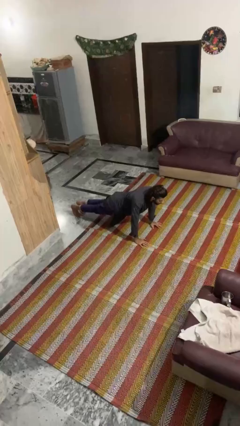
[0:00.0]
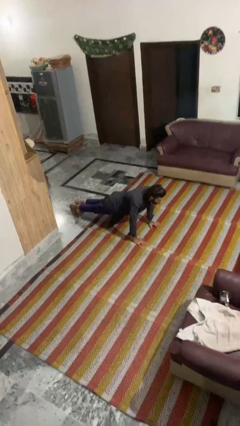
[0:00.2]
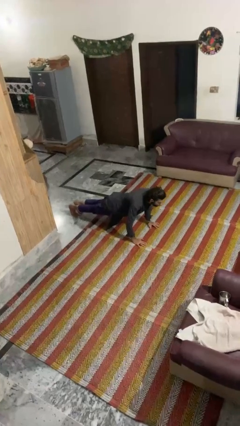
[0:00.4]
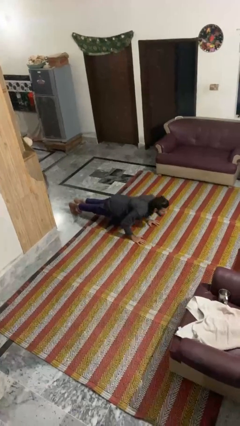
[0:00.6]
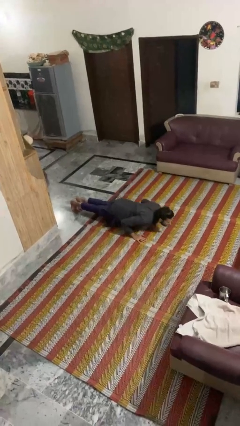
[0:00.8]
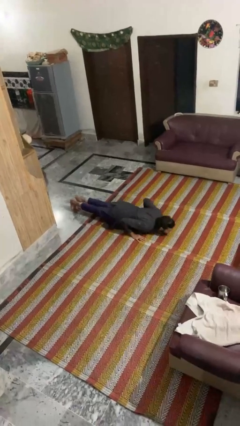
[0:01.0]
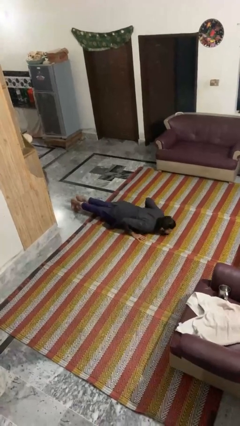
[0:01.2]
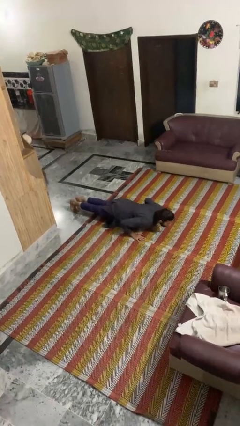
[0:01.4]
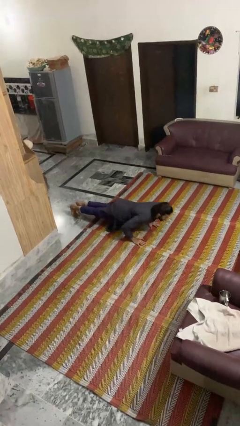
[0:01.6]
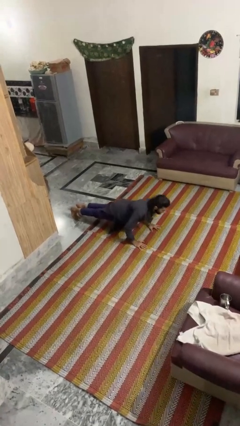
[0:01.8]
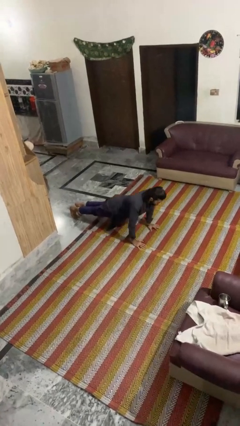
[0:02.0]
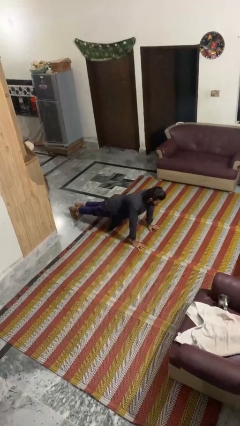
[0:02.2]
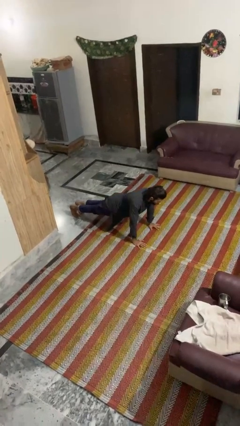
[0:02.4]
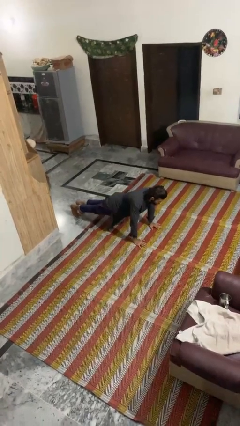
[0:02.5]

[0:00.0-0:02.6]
person exercises with pushup

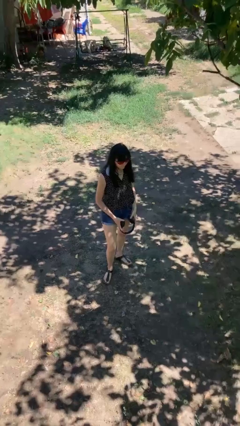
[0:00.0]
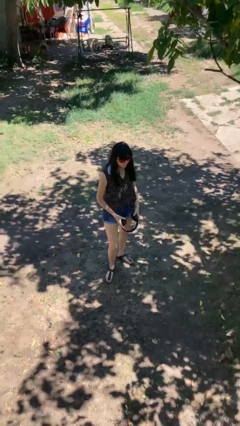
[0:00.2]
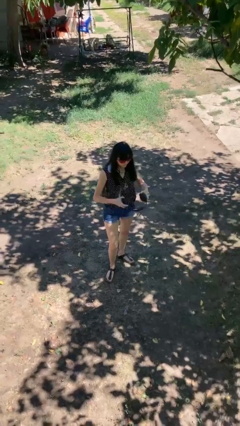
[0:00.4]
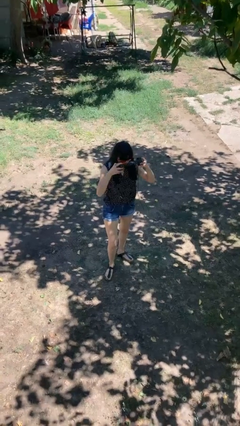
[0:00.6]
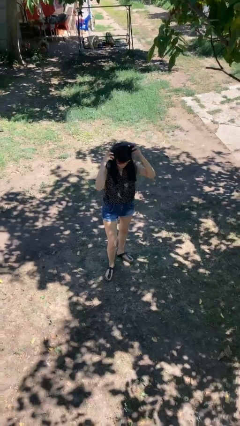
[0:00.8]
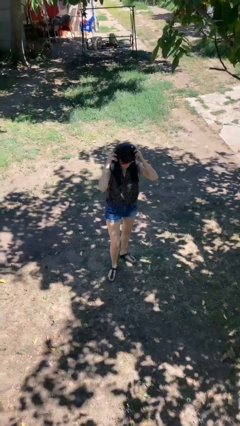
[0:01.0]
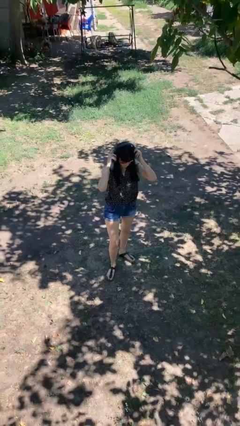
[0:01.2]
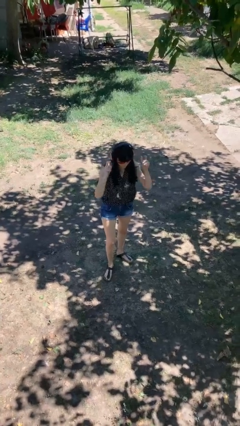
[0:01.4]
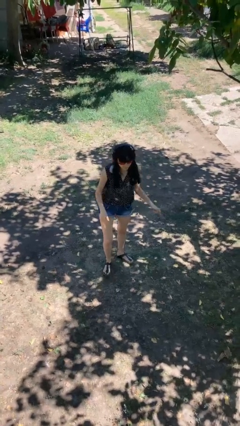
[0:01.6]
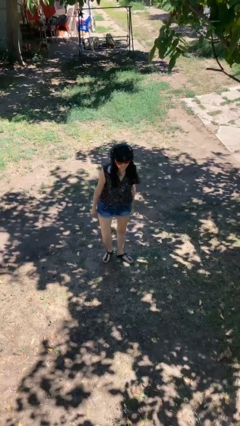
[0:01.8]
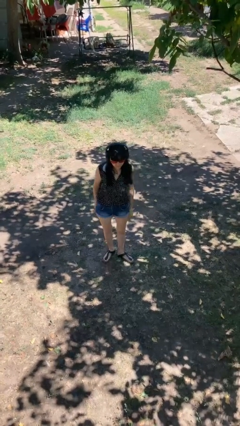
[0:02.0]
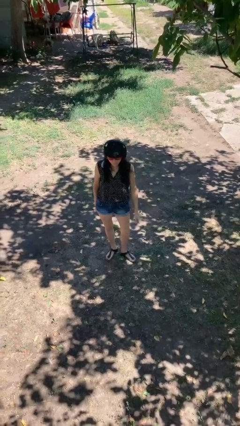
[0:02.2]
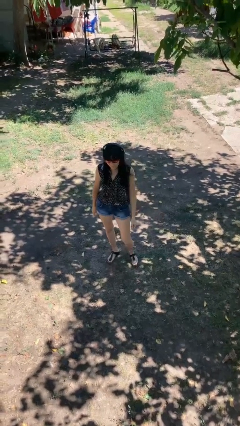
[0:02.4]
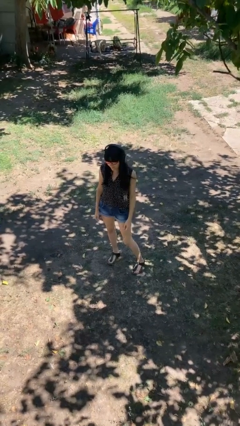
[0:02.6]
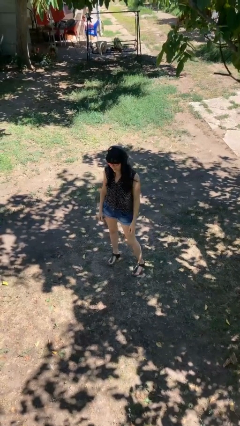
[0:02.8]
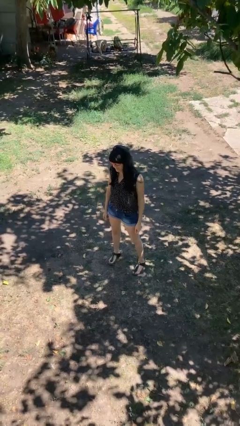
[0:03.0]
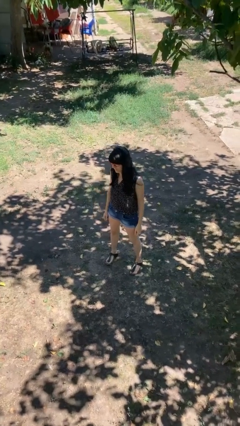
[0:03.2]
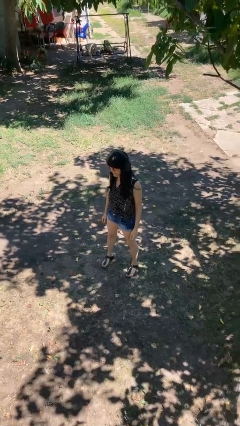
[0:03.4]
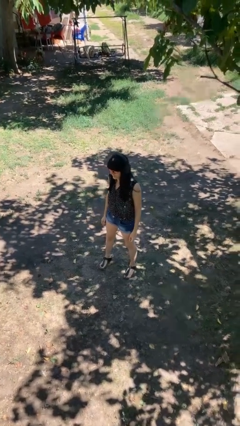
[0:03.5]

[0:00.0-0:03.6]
person puts on headphones

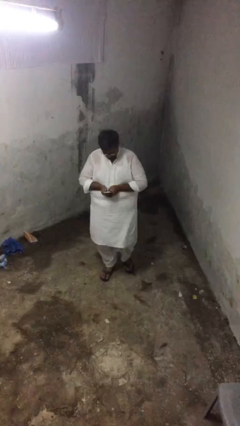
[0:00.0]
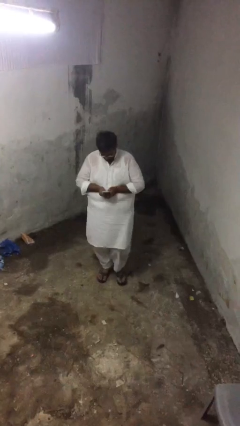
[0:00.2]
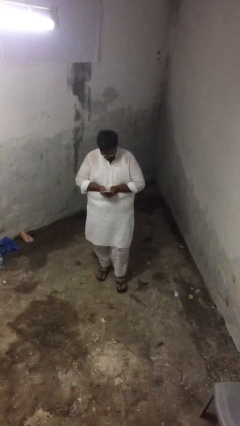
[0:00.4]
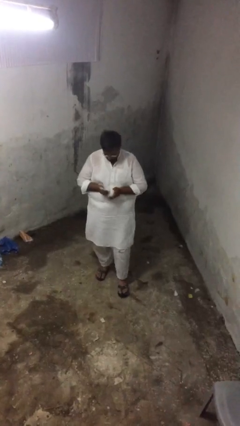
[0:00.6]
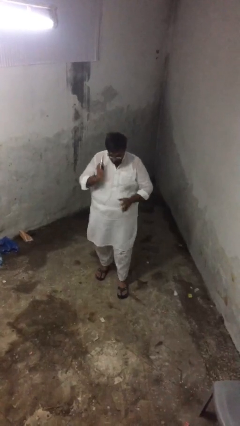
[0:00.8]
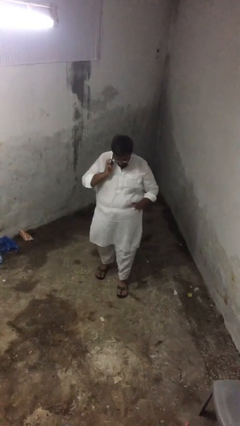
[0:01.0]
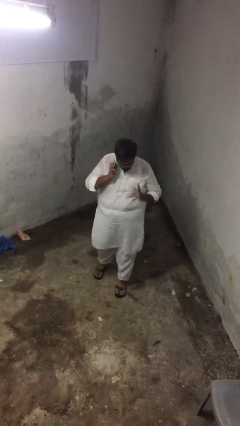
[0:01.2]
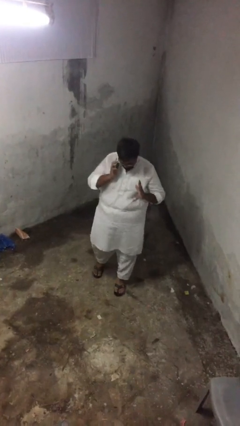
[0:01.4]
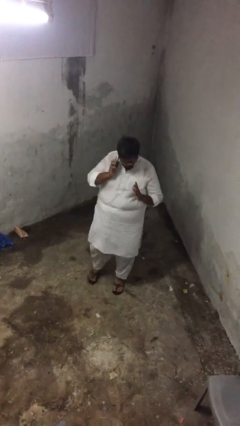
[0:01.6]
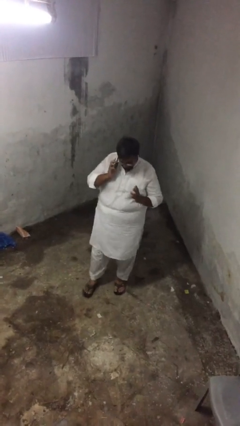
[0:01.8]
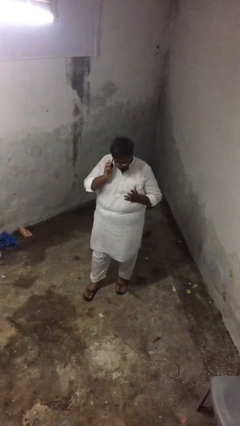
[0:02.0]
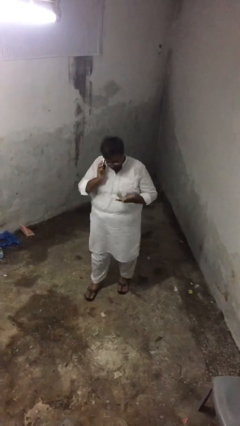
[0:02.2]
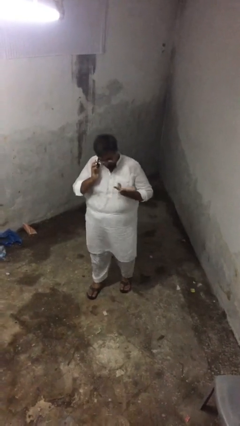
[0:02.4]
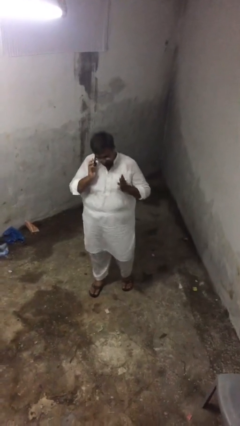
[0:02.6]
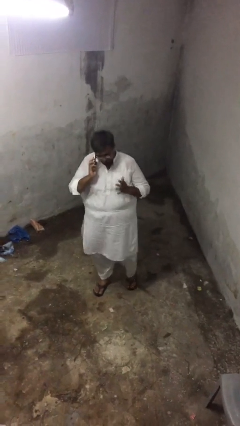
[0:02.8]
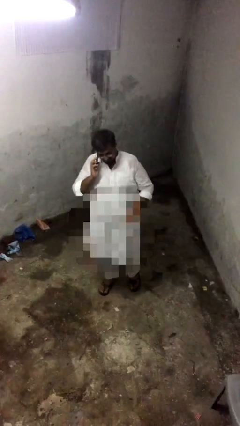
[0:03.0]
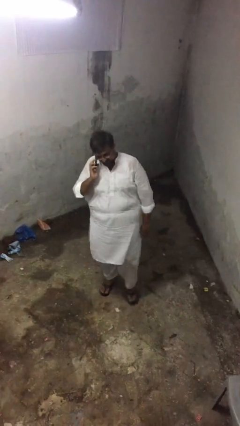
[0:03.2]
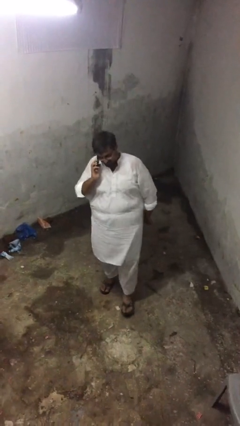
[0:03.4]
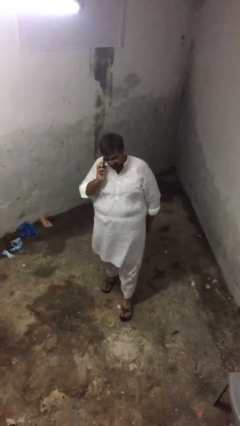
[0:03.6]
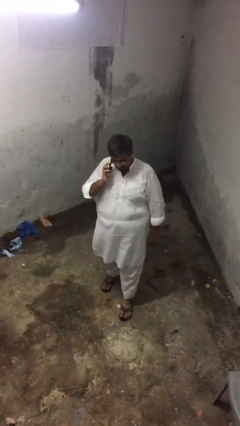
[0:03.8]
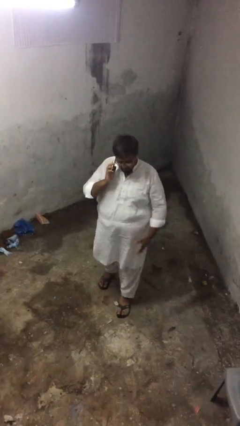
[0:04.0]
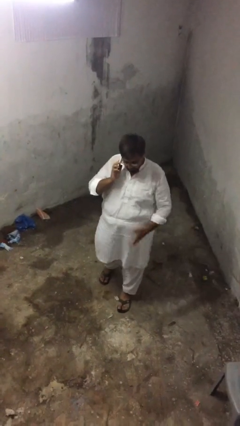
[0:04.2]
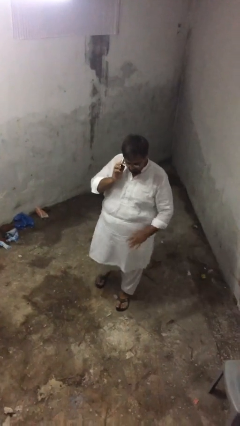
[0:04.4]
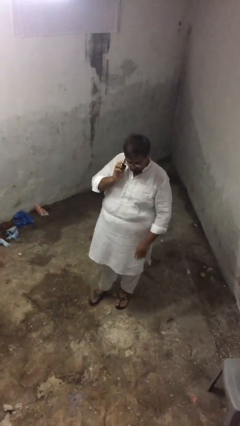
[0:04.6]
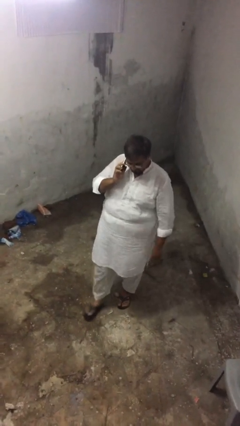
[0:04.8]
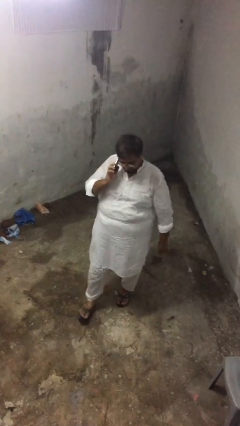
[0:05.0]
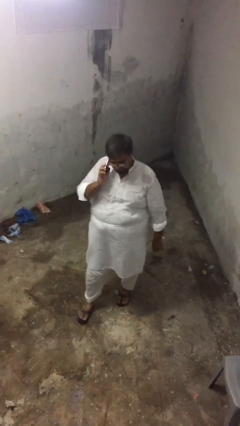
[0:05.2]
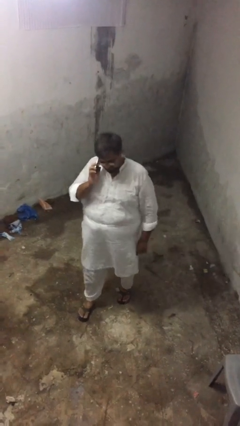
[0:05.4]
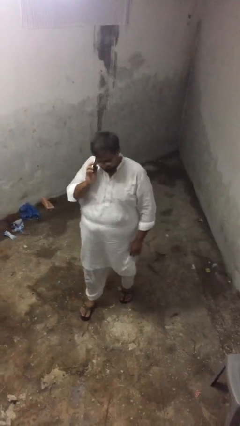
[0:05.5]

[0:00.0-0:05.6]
person talks on phone

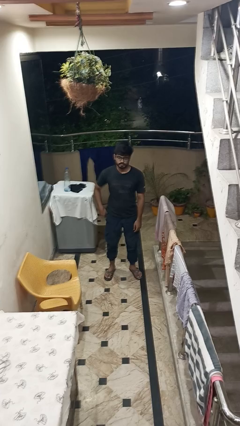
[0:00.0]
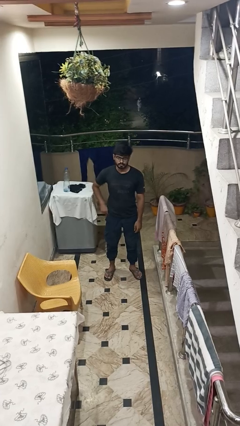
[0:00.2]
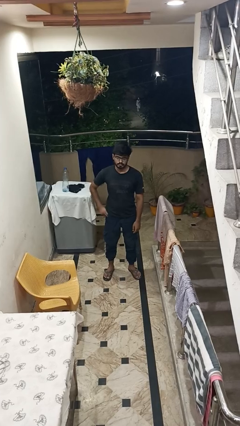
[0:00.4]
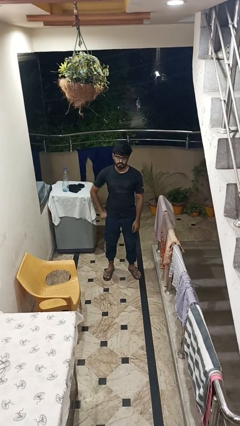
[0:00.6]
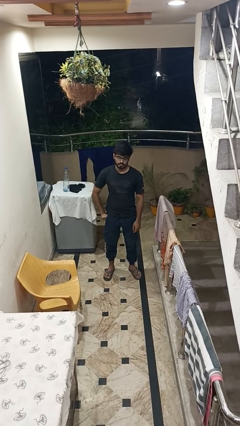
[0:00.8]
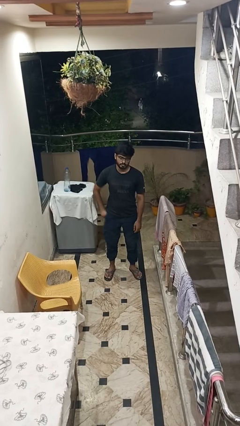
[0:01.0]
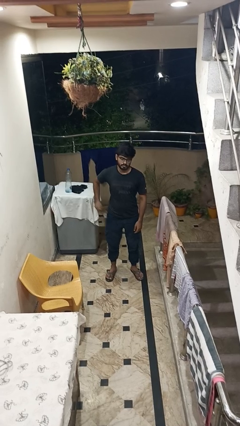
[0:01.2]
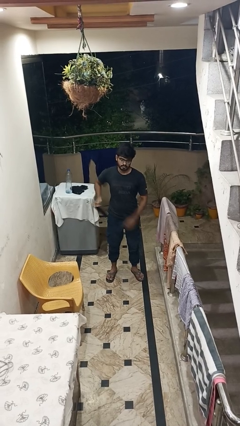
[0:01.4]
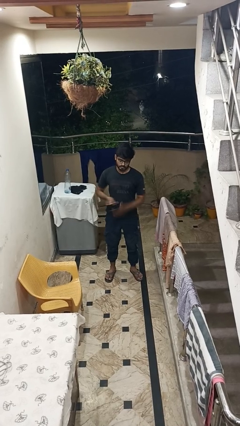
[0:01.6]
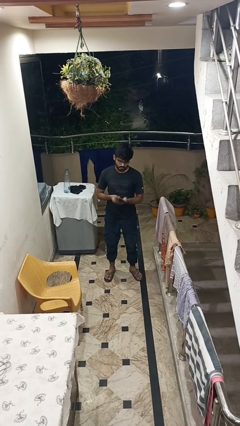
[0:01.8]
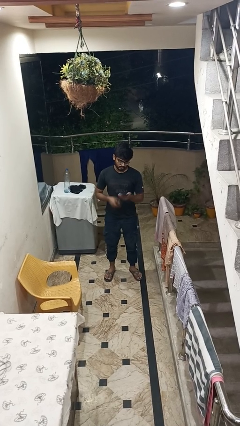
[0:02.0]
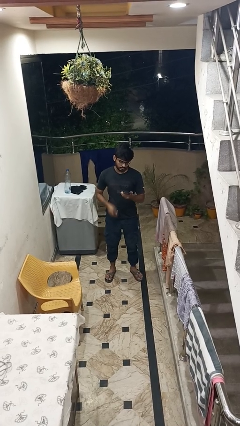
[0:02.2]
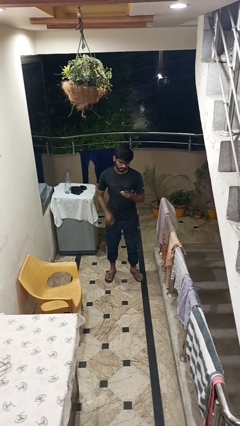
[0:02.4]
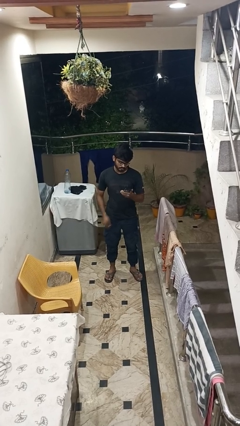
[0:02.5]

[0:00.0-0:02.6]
person takes phone from pocket

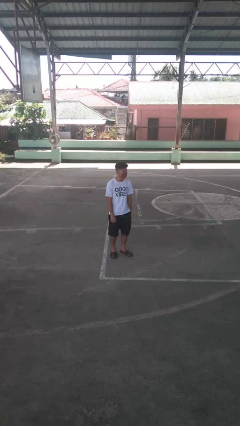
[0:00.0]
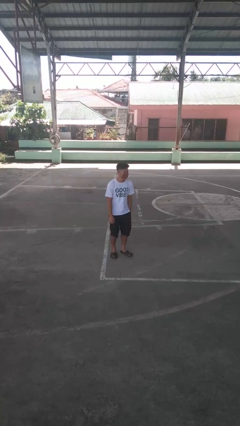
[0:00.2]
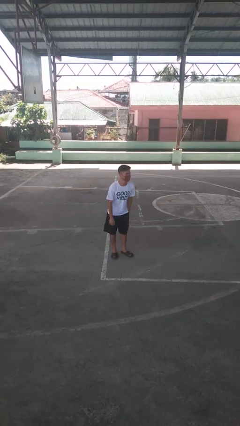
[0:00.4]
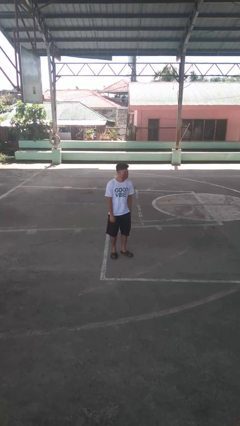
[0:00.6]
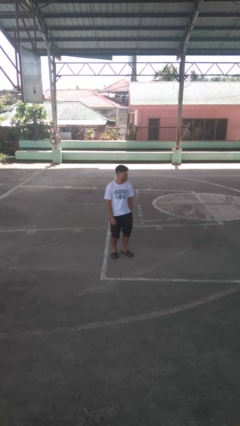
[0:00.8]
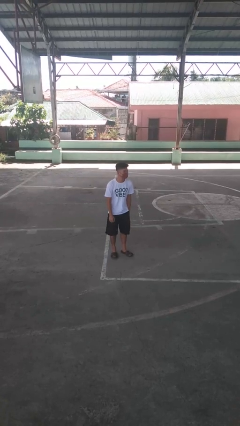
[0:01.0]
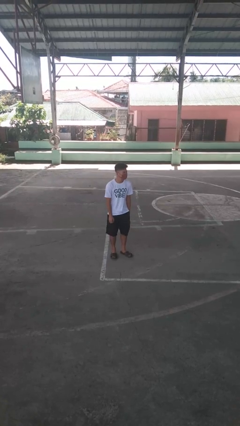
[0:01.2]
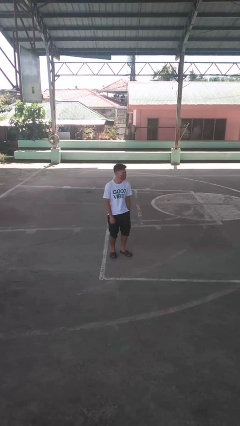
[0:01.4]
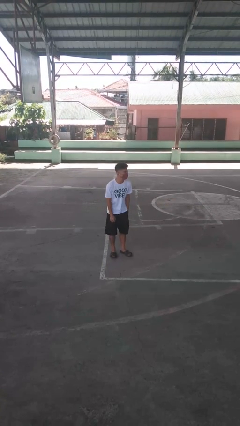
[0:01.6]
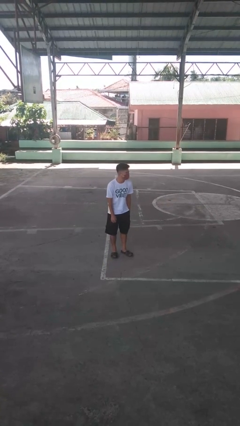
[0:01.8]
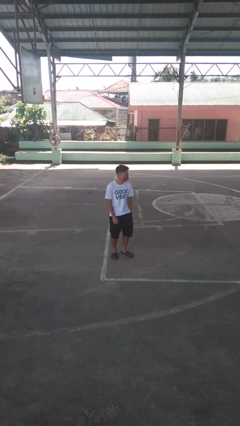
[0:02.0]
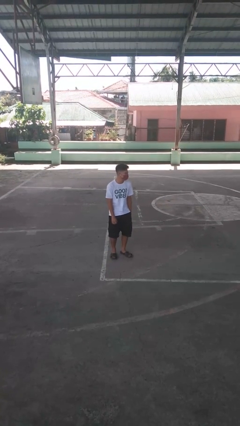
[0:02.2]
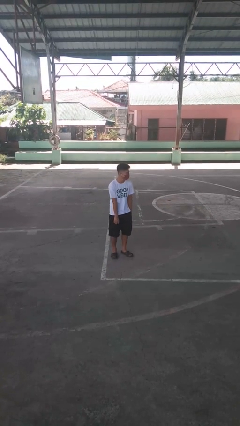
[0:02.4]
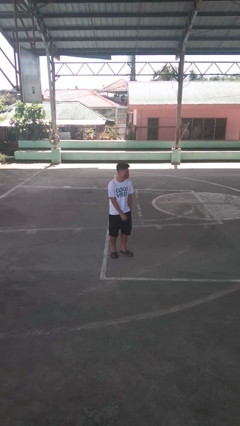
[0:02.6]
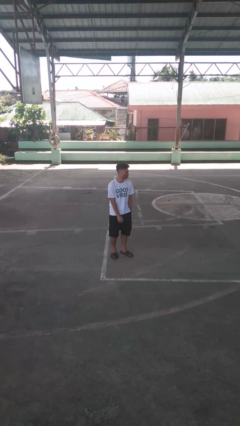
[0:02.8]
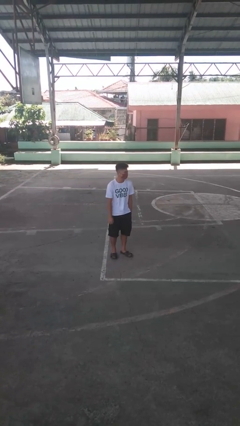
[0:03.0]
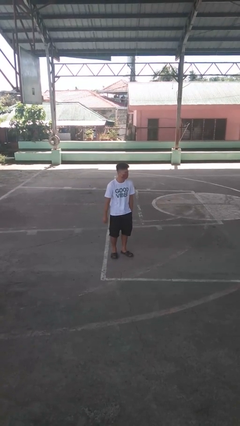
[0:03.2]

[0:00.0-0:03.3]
person wiggles hips

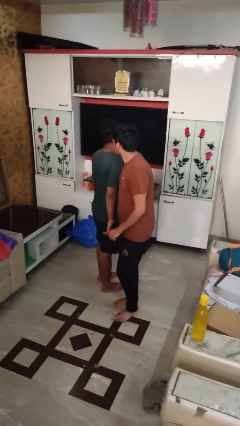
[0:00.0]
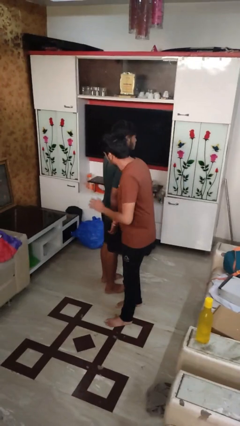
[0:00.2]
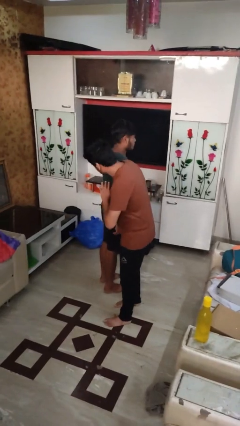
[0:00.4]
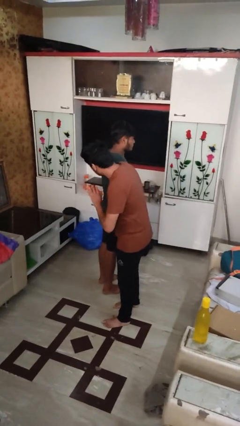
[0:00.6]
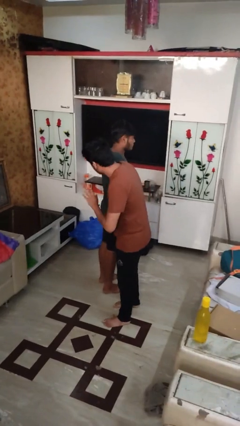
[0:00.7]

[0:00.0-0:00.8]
person bumps into person
